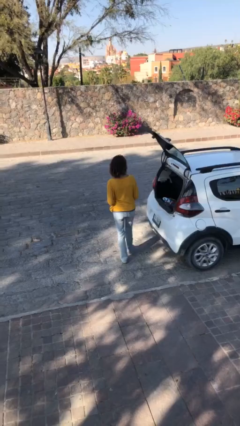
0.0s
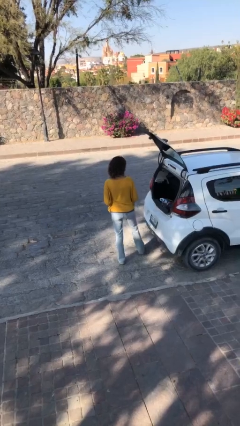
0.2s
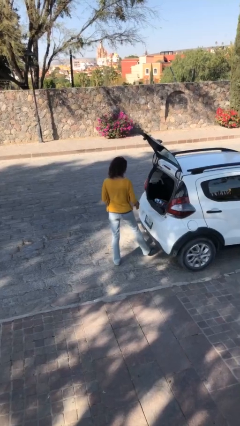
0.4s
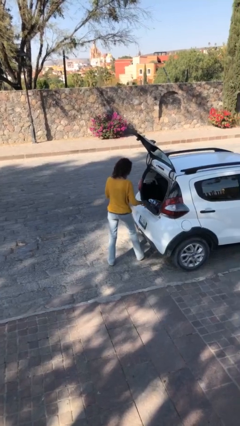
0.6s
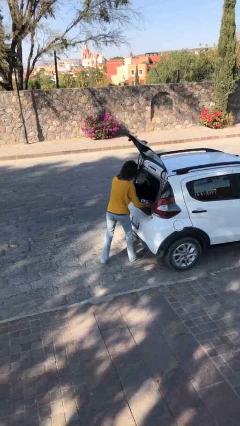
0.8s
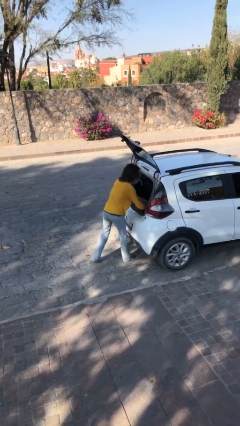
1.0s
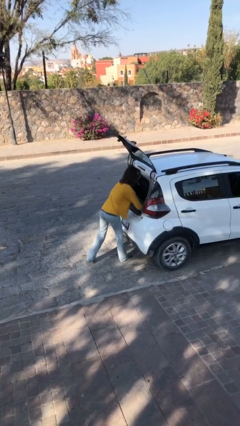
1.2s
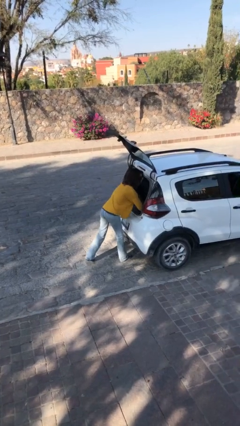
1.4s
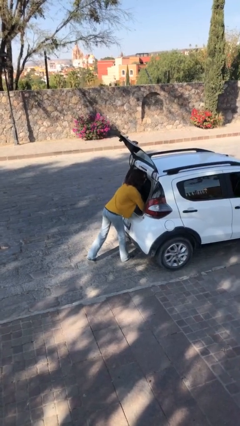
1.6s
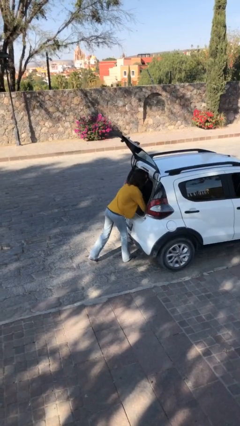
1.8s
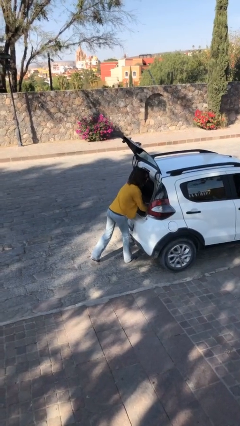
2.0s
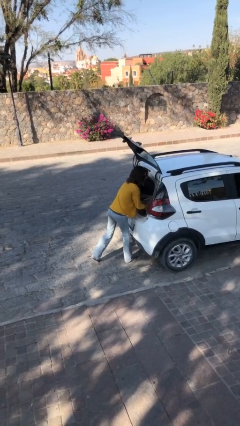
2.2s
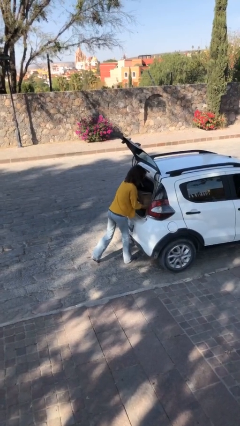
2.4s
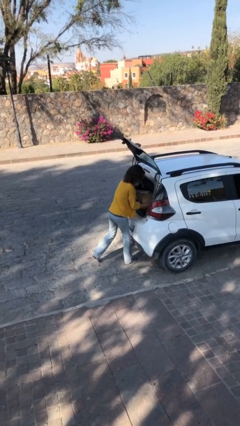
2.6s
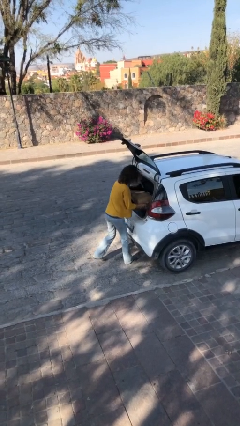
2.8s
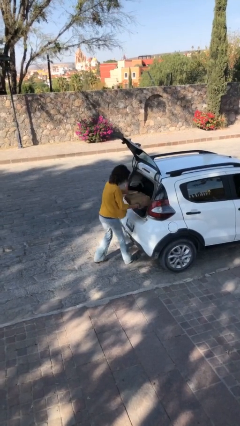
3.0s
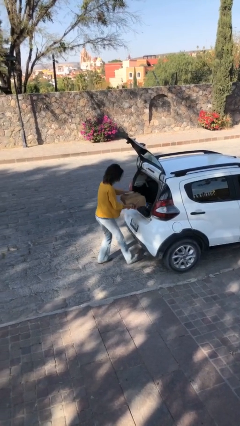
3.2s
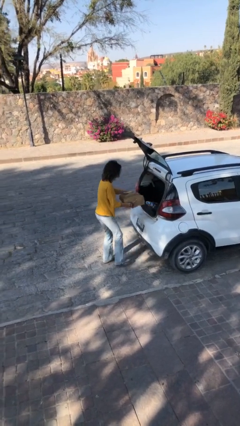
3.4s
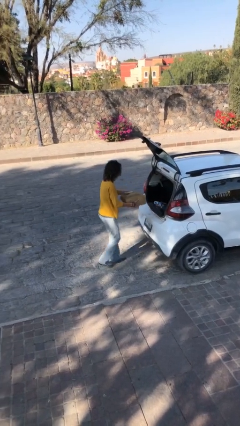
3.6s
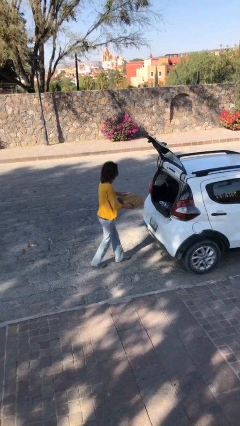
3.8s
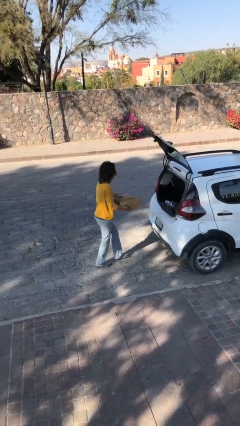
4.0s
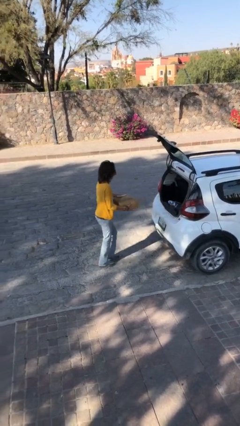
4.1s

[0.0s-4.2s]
person unloads car

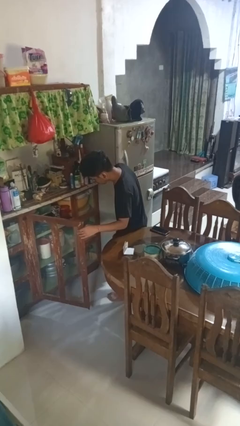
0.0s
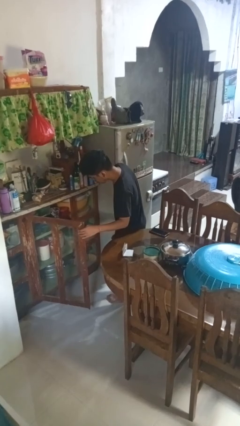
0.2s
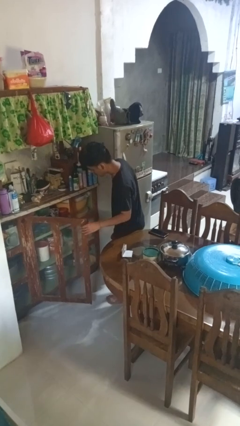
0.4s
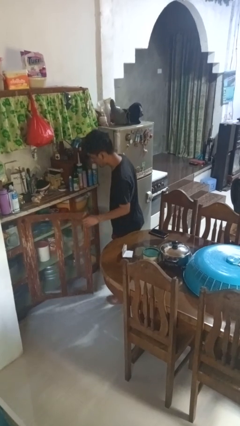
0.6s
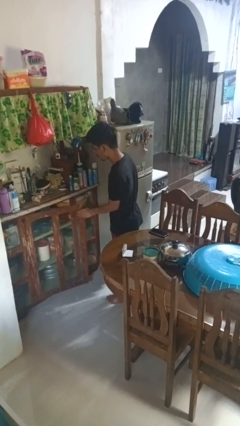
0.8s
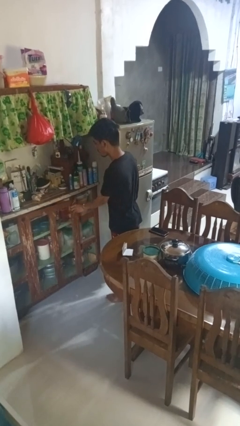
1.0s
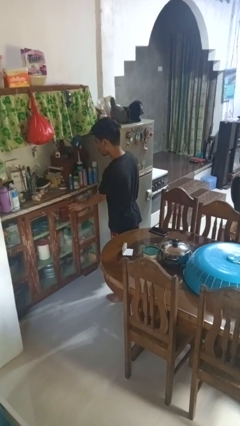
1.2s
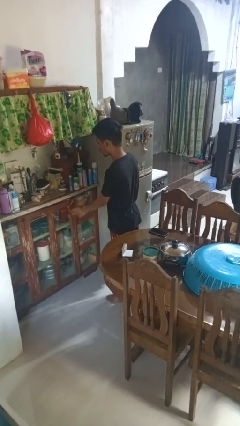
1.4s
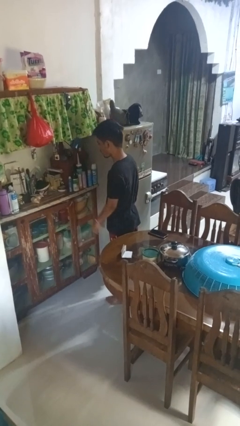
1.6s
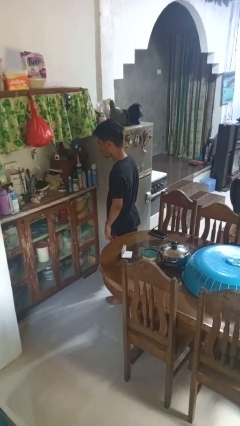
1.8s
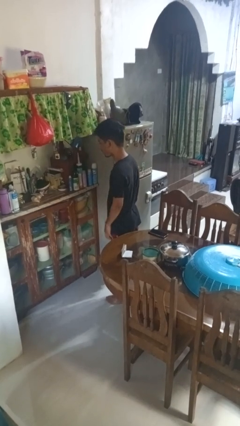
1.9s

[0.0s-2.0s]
person closes cabinet

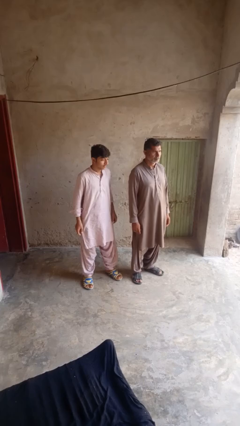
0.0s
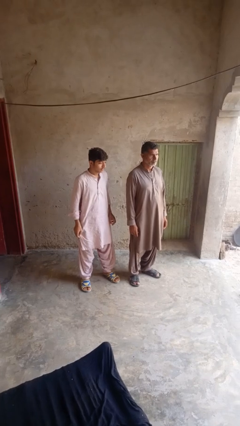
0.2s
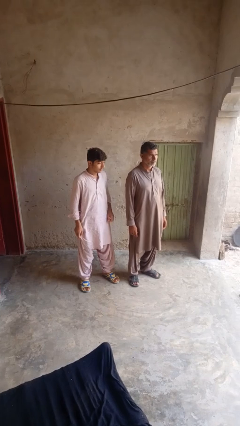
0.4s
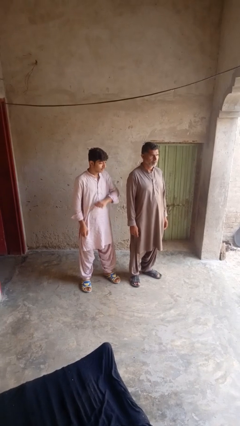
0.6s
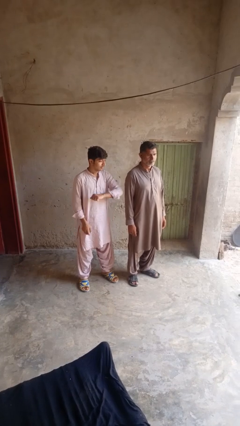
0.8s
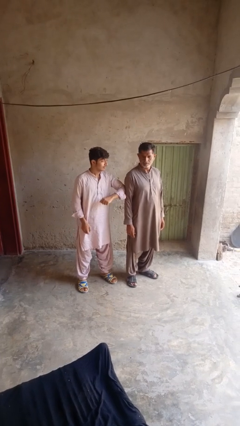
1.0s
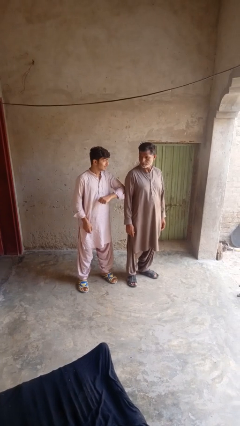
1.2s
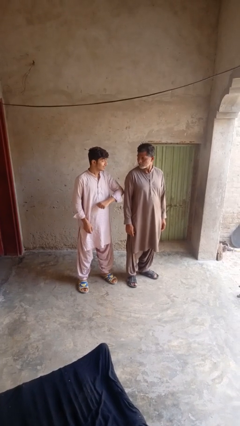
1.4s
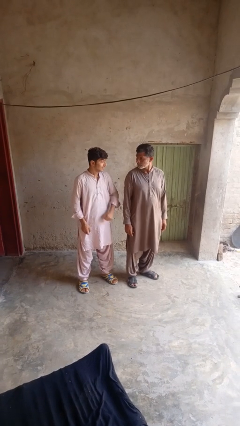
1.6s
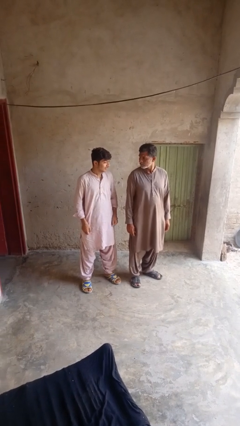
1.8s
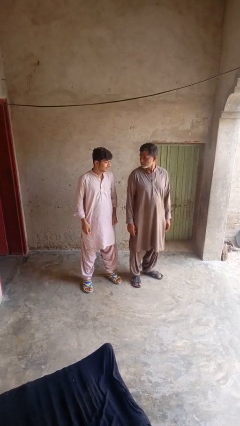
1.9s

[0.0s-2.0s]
person nudges person with elbow

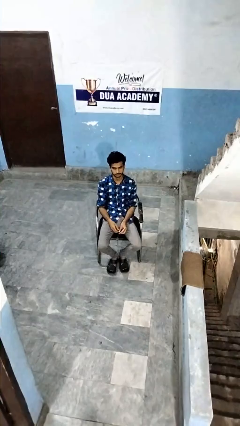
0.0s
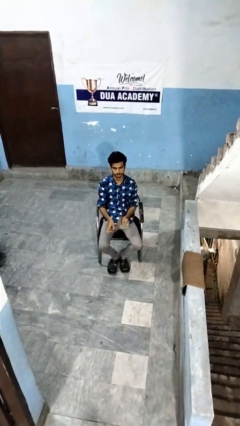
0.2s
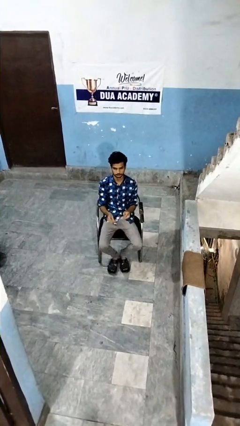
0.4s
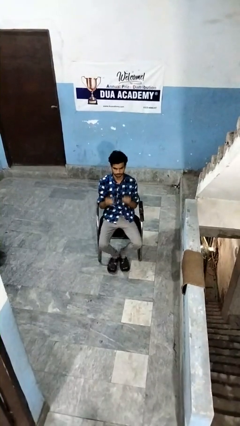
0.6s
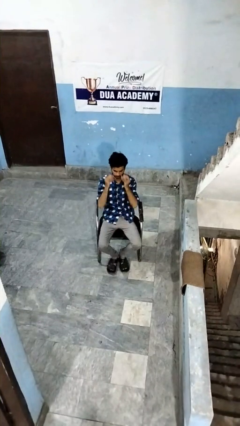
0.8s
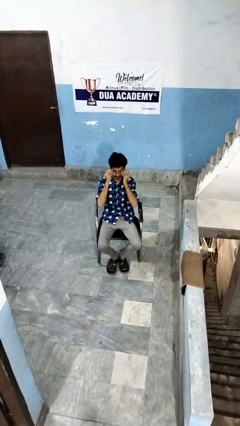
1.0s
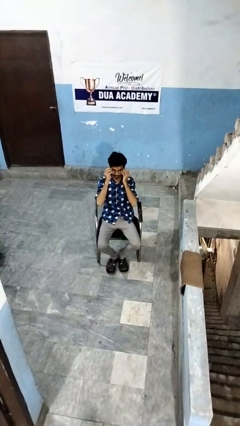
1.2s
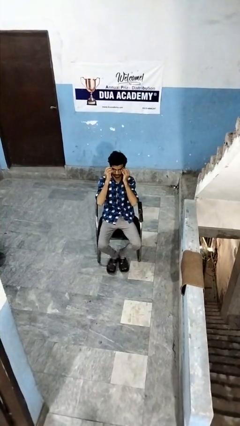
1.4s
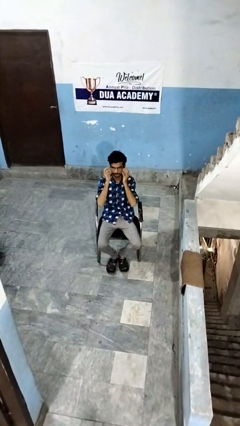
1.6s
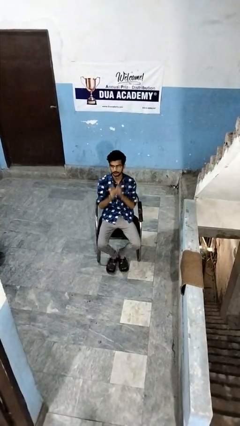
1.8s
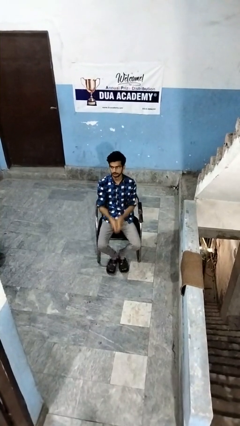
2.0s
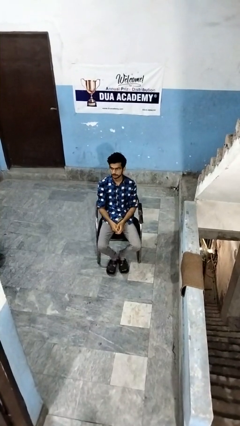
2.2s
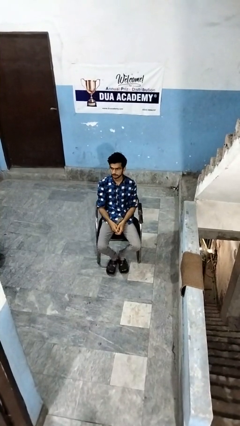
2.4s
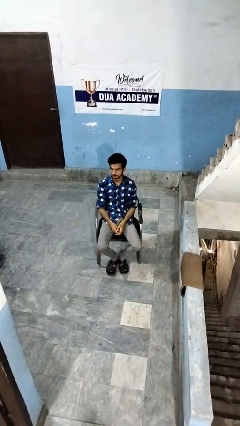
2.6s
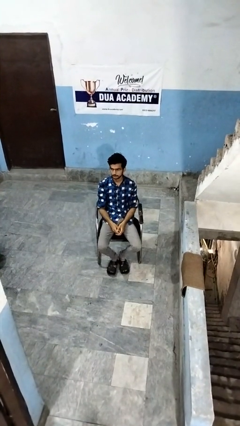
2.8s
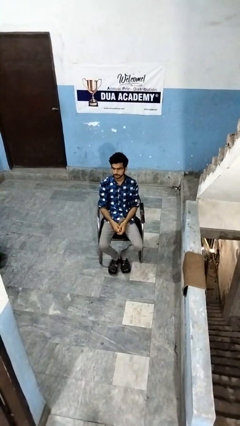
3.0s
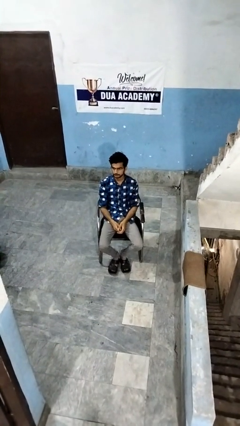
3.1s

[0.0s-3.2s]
person puts on glasses

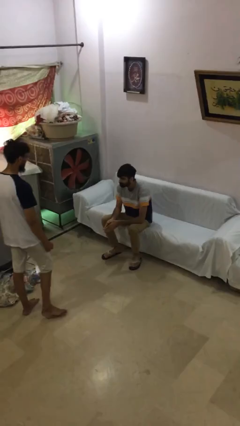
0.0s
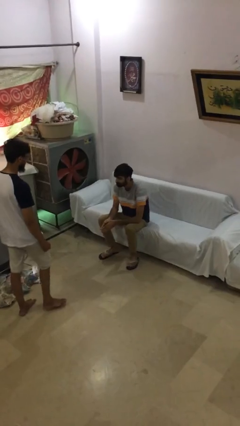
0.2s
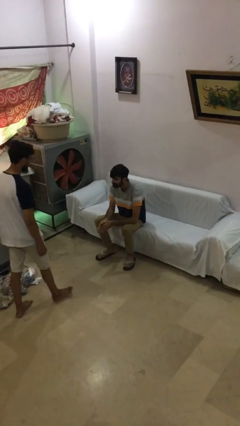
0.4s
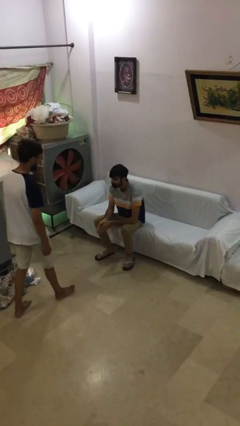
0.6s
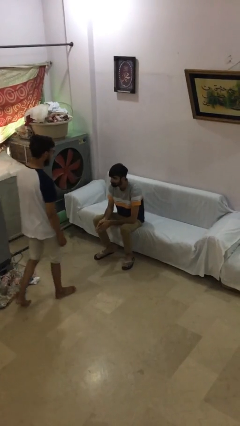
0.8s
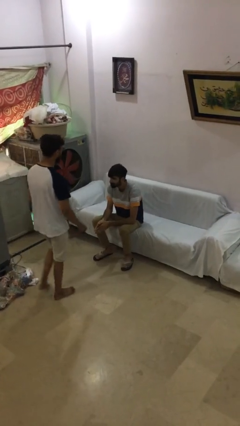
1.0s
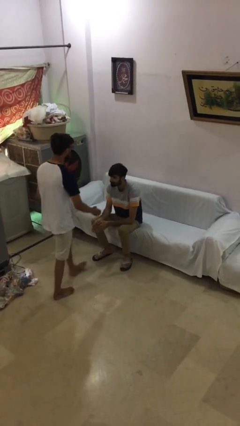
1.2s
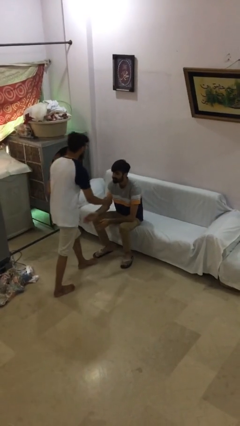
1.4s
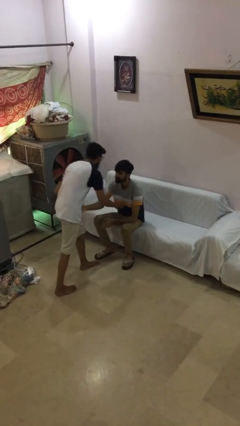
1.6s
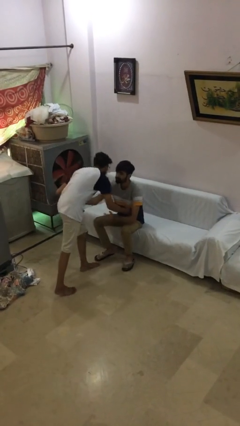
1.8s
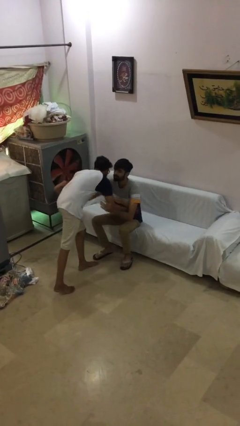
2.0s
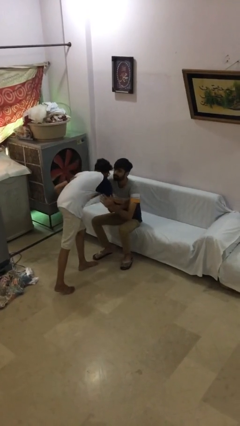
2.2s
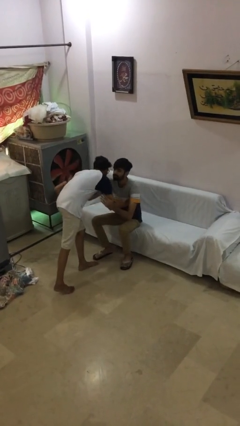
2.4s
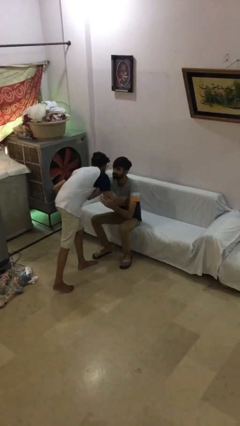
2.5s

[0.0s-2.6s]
person embraces person

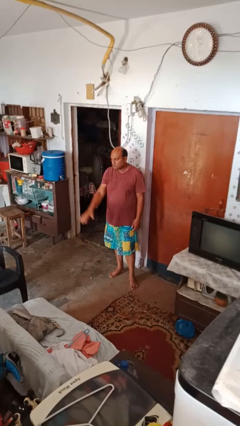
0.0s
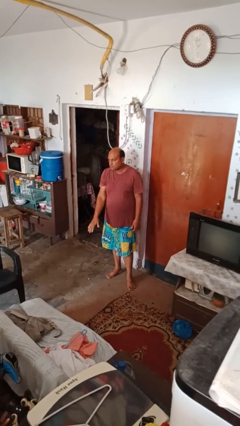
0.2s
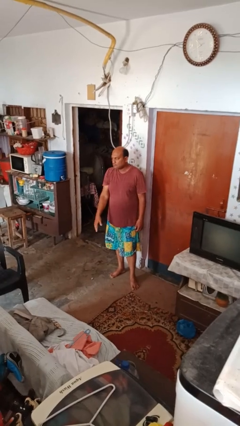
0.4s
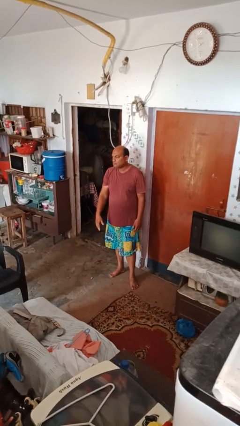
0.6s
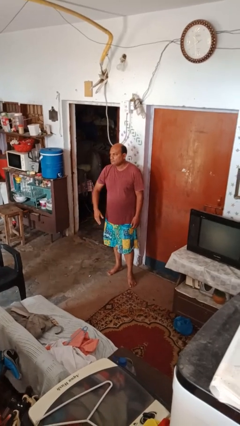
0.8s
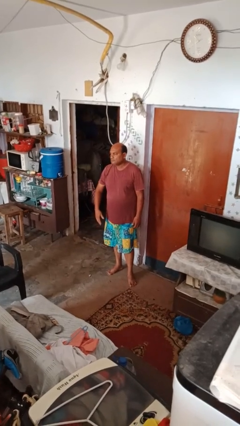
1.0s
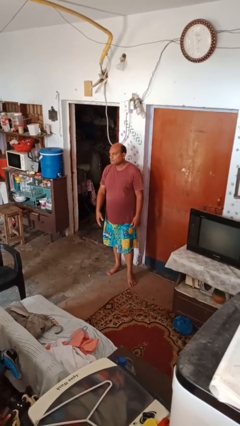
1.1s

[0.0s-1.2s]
person gestures lower hand

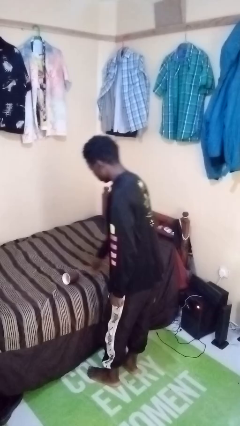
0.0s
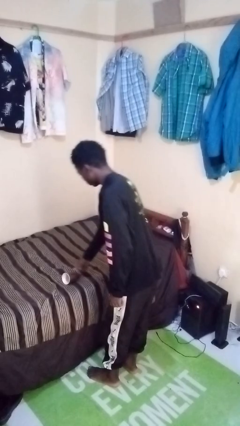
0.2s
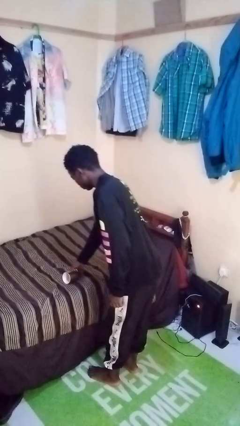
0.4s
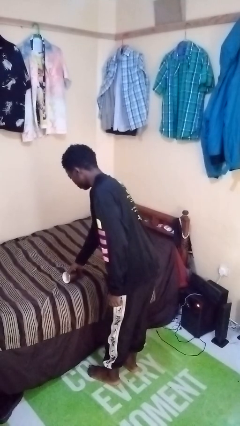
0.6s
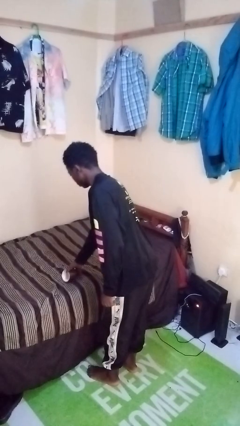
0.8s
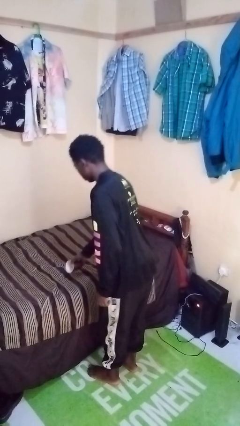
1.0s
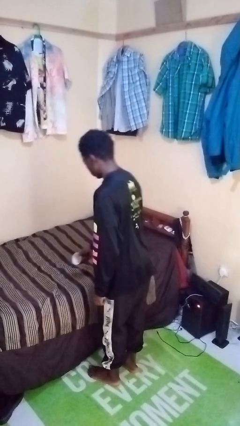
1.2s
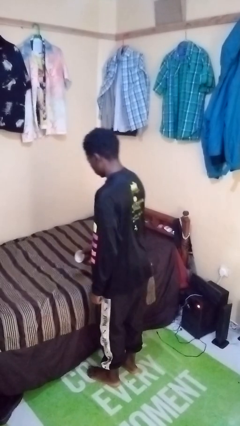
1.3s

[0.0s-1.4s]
person picks up object from bed

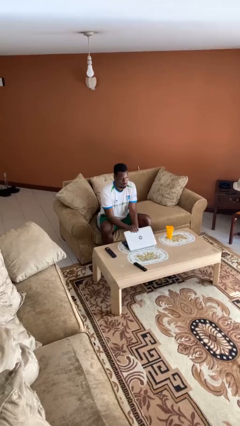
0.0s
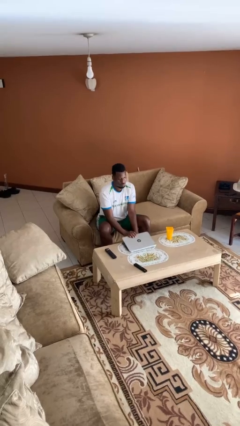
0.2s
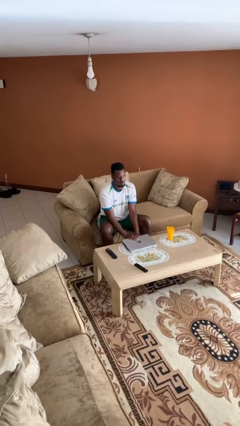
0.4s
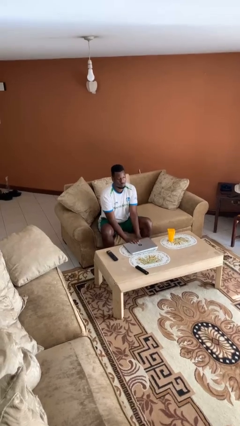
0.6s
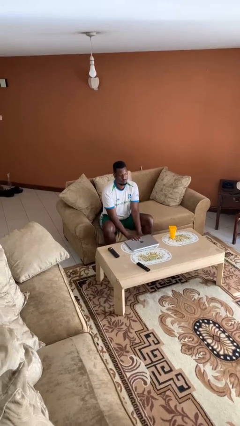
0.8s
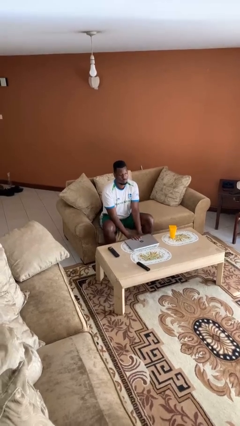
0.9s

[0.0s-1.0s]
person interacts with laptop
